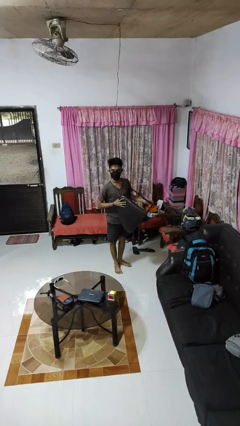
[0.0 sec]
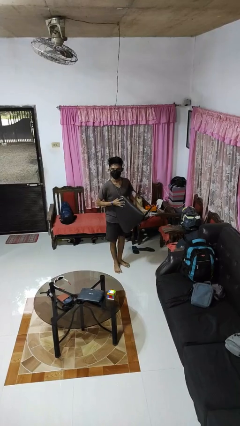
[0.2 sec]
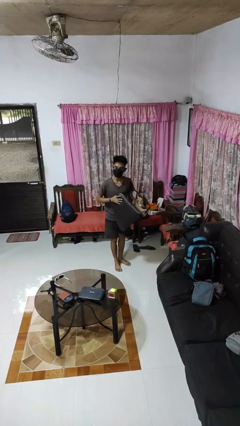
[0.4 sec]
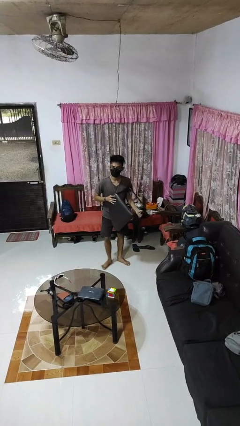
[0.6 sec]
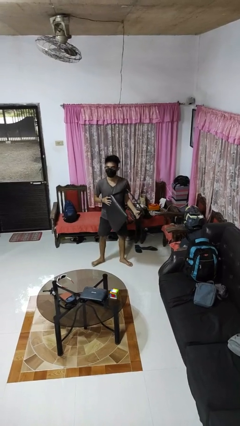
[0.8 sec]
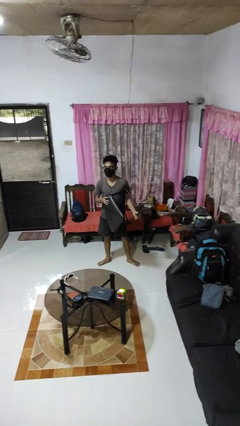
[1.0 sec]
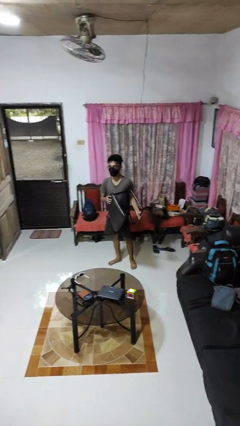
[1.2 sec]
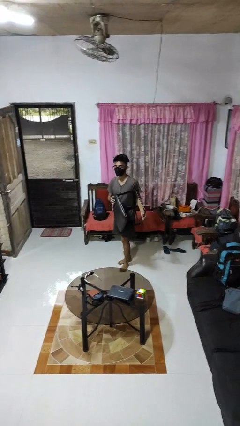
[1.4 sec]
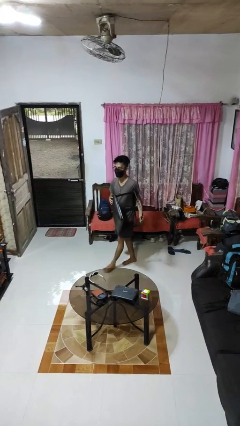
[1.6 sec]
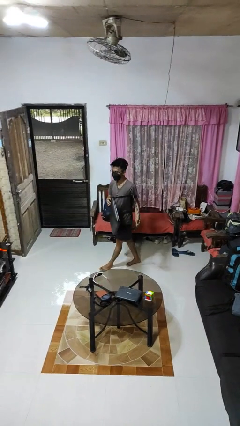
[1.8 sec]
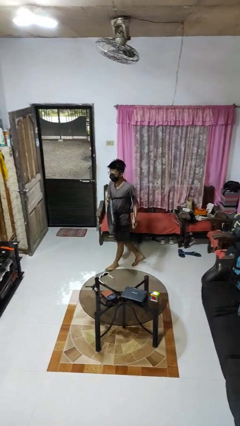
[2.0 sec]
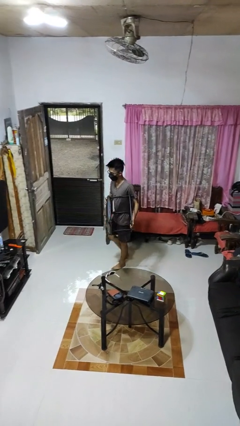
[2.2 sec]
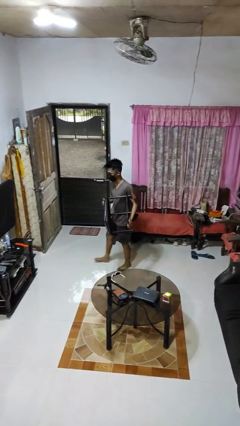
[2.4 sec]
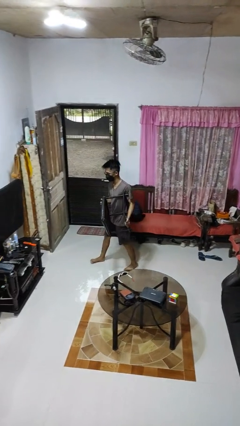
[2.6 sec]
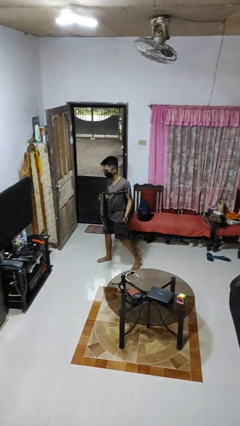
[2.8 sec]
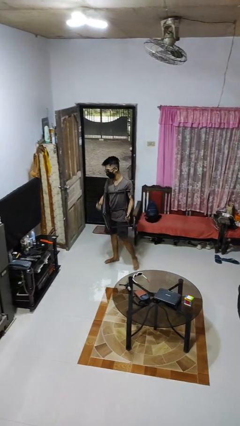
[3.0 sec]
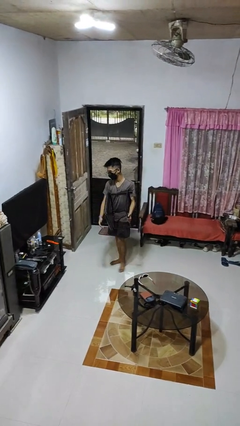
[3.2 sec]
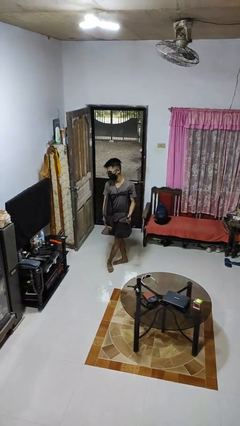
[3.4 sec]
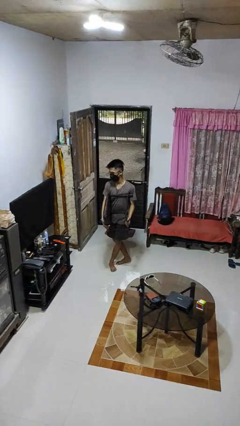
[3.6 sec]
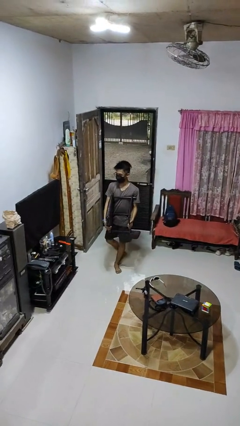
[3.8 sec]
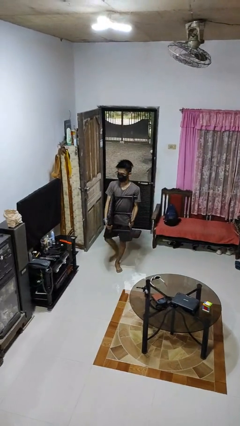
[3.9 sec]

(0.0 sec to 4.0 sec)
person carries furniture

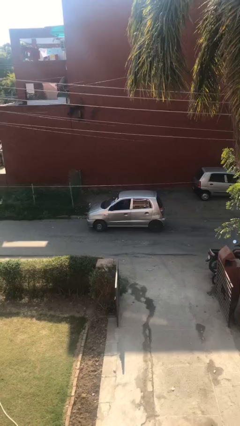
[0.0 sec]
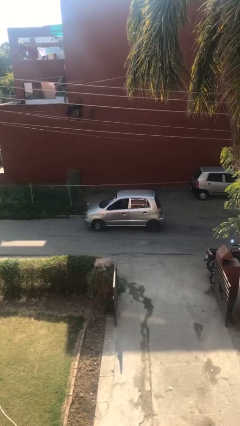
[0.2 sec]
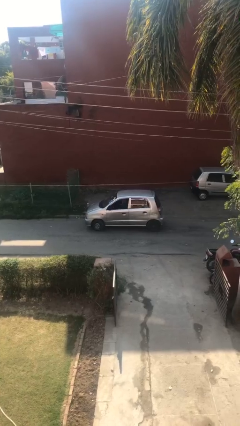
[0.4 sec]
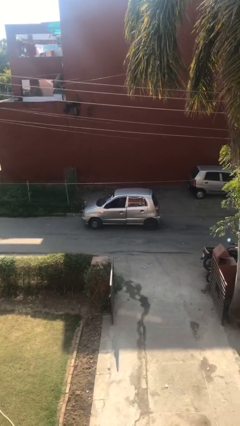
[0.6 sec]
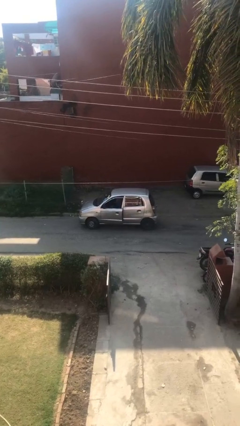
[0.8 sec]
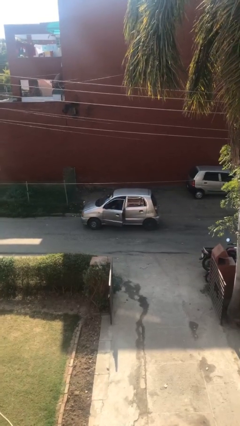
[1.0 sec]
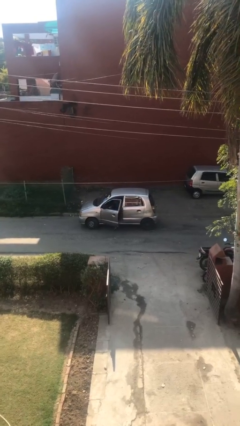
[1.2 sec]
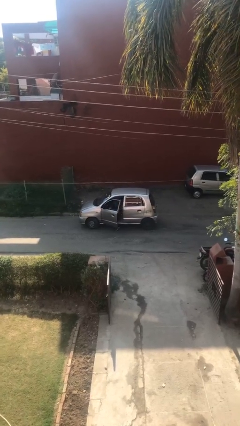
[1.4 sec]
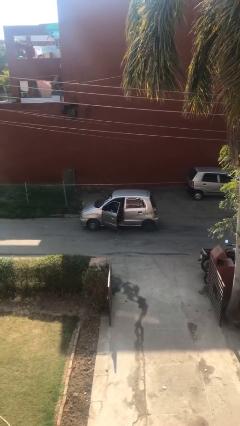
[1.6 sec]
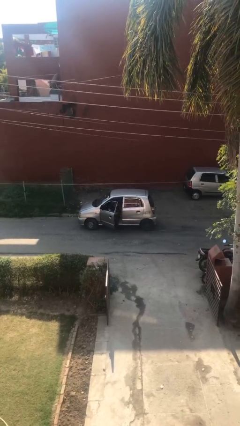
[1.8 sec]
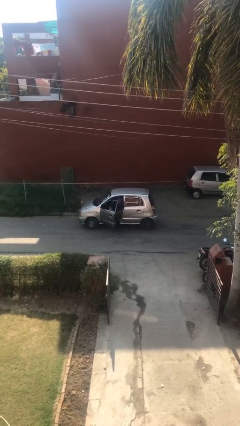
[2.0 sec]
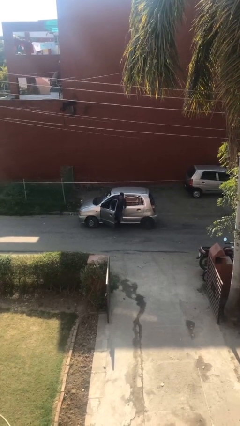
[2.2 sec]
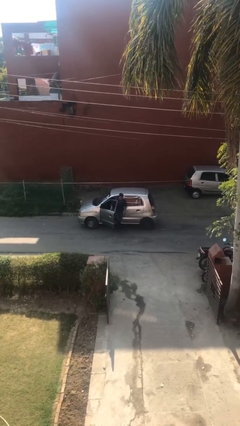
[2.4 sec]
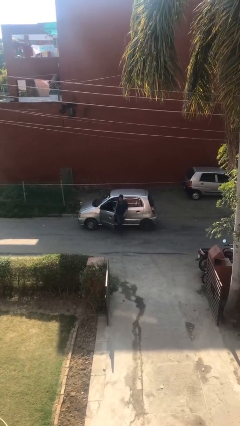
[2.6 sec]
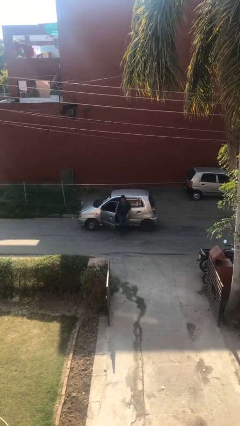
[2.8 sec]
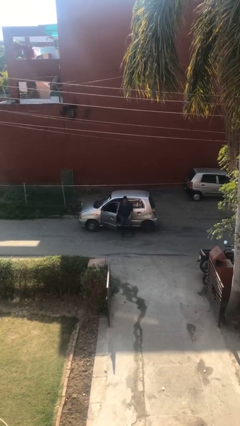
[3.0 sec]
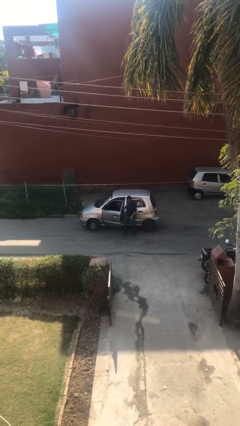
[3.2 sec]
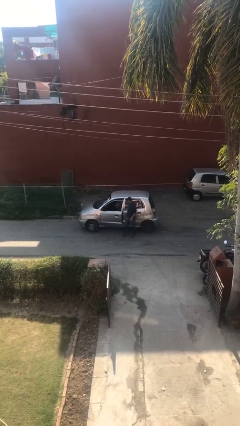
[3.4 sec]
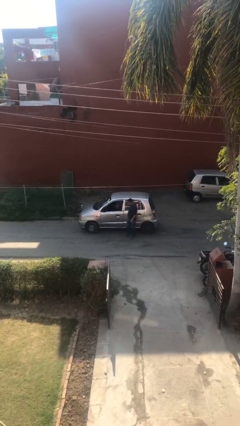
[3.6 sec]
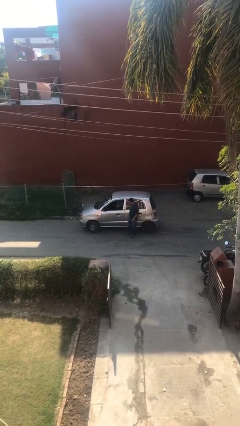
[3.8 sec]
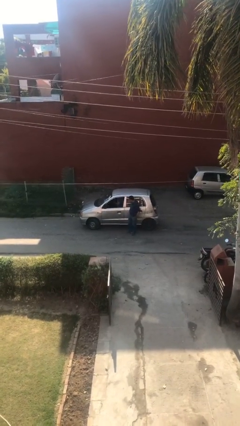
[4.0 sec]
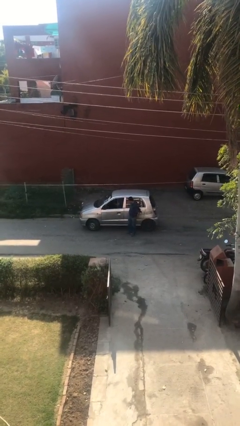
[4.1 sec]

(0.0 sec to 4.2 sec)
car drops off person

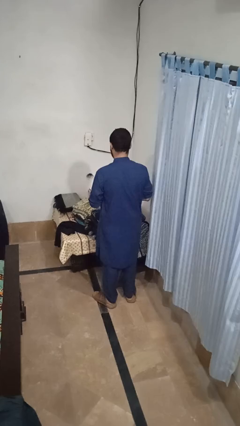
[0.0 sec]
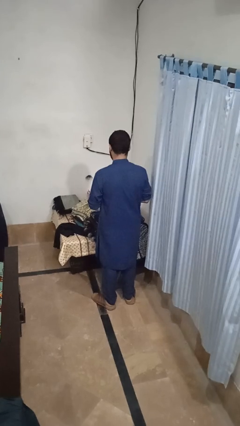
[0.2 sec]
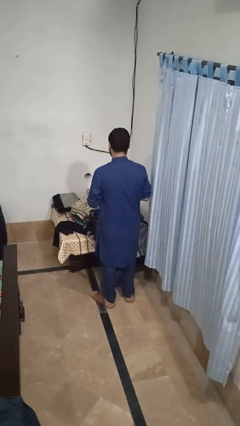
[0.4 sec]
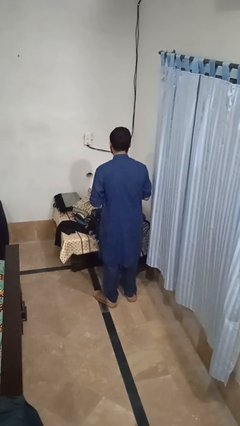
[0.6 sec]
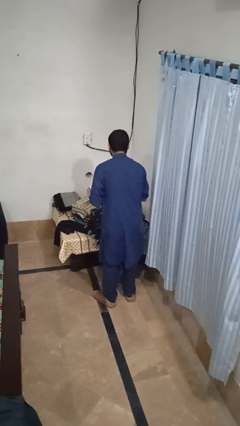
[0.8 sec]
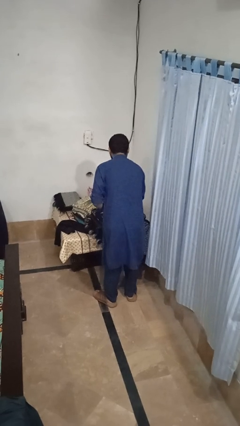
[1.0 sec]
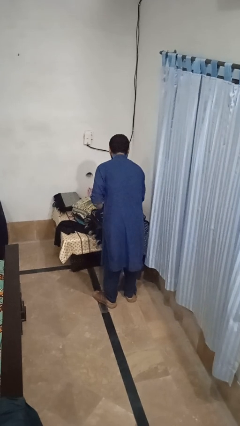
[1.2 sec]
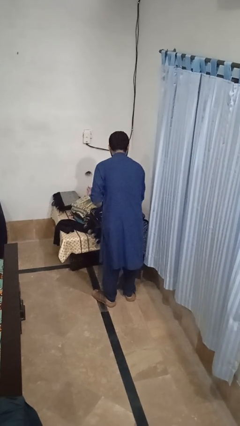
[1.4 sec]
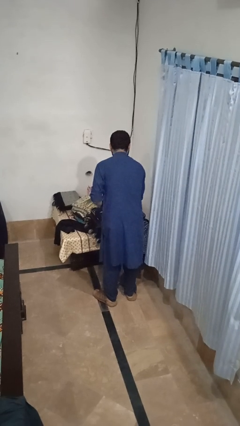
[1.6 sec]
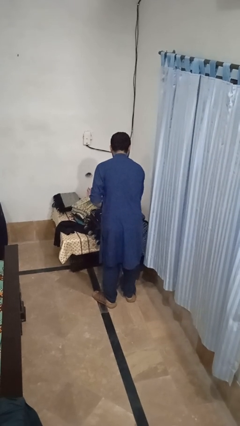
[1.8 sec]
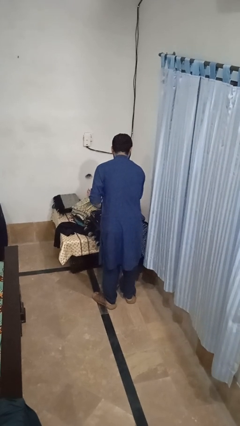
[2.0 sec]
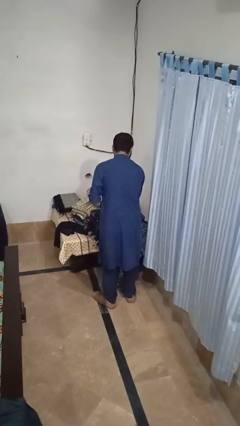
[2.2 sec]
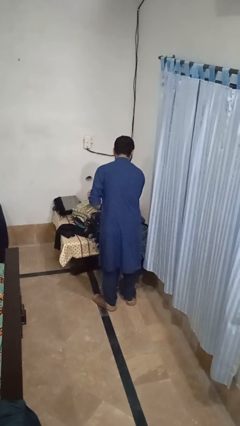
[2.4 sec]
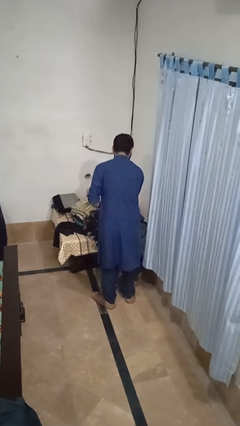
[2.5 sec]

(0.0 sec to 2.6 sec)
person loads clothes into suitcase

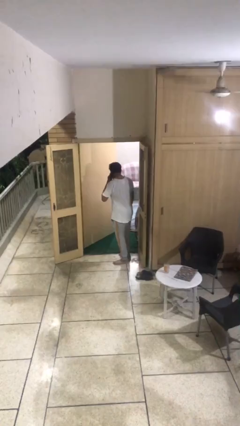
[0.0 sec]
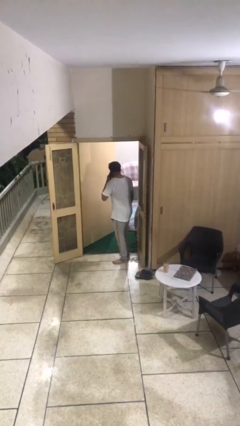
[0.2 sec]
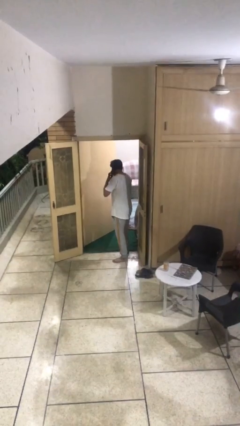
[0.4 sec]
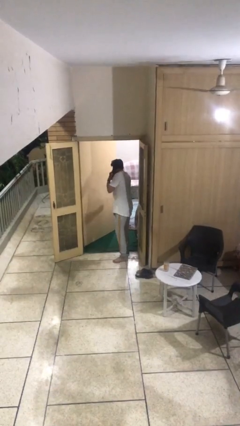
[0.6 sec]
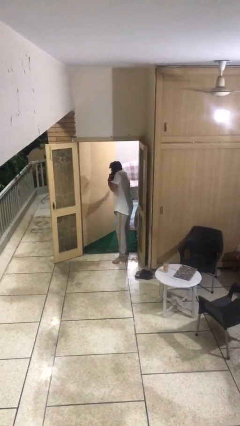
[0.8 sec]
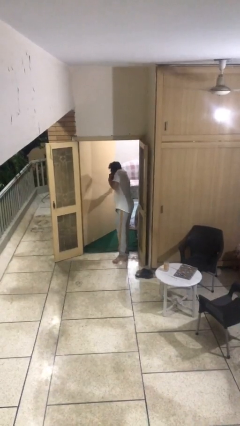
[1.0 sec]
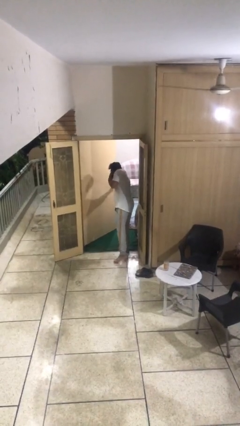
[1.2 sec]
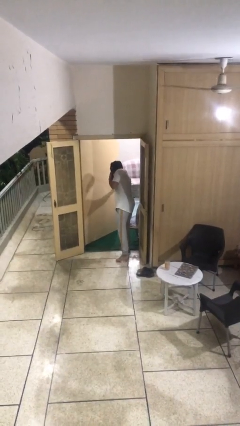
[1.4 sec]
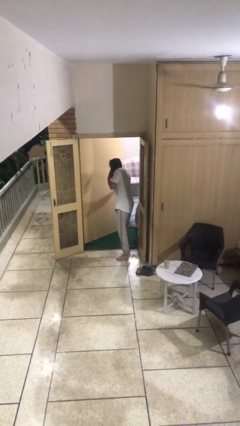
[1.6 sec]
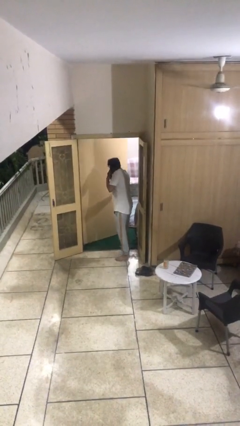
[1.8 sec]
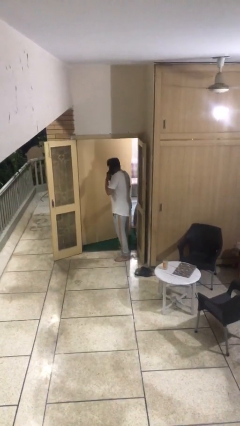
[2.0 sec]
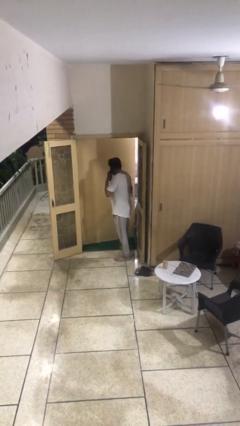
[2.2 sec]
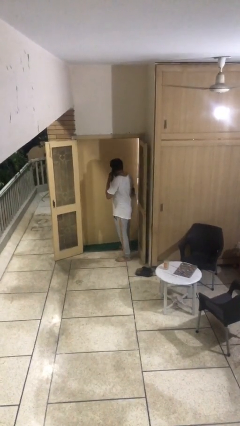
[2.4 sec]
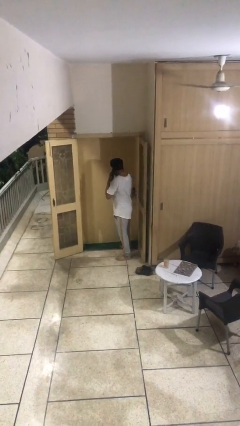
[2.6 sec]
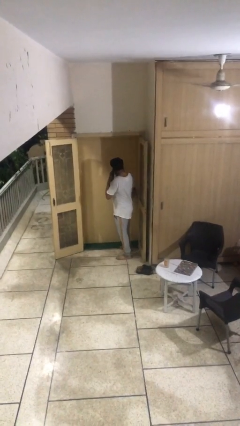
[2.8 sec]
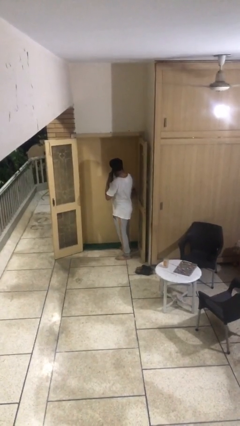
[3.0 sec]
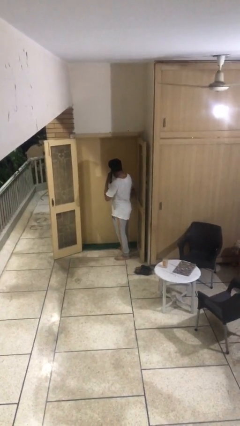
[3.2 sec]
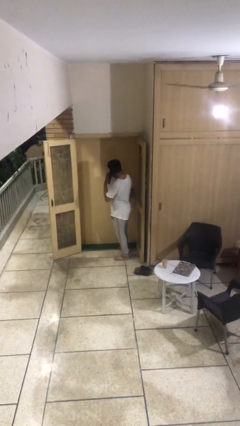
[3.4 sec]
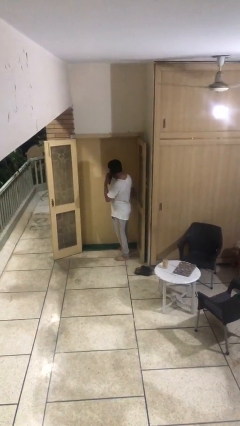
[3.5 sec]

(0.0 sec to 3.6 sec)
person closes facility door

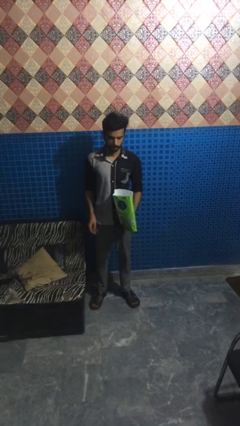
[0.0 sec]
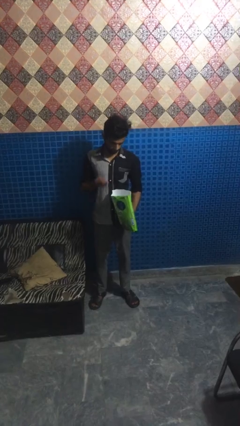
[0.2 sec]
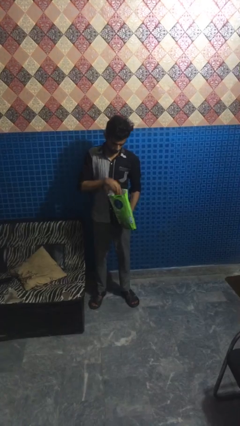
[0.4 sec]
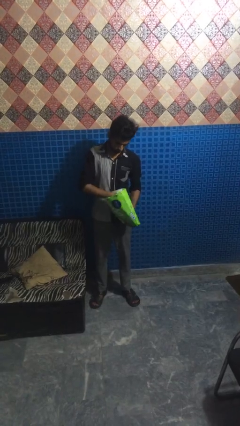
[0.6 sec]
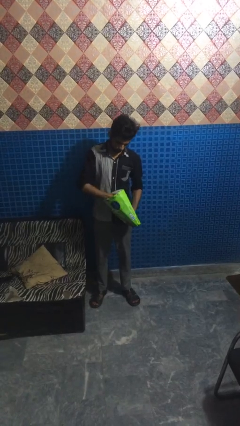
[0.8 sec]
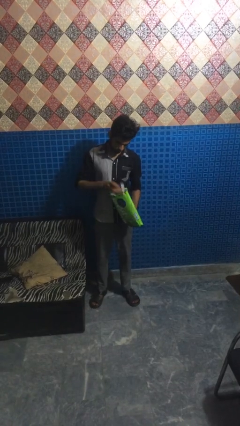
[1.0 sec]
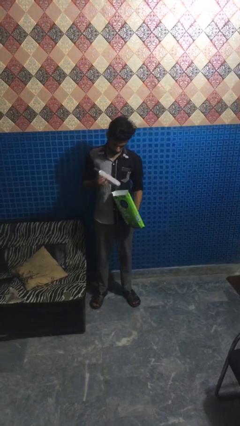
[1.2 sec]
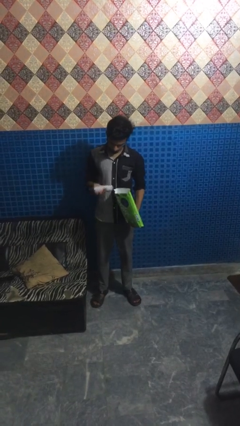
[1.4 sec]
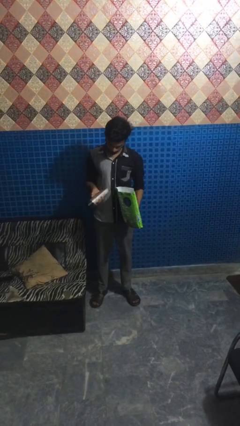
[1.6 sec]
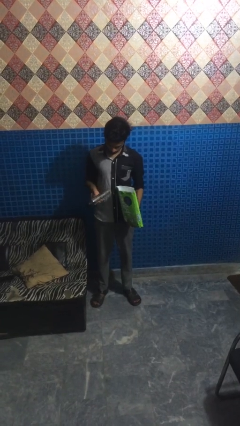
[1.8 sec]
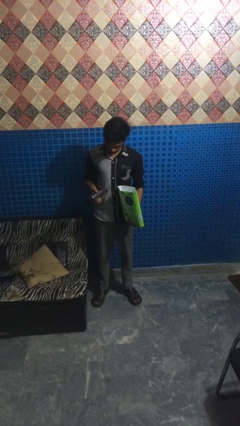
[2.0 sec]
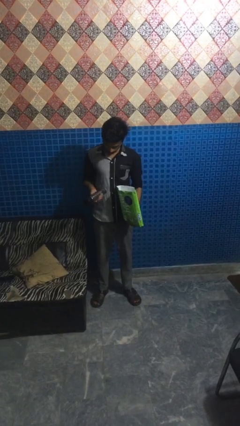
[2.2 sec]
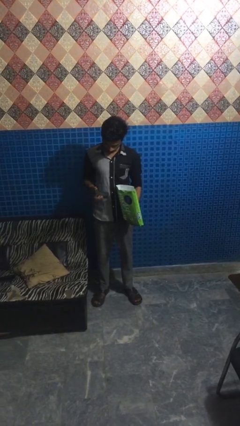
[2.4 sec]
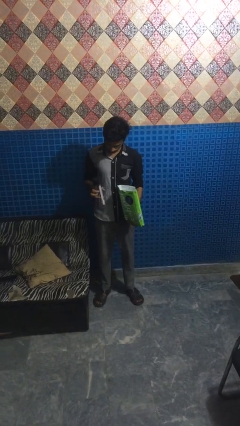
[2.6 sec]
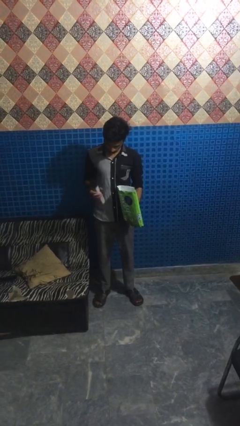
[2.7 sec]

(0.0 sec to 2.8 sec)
person takes object from bag
